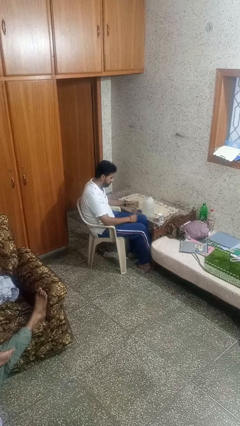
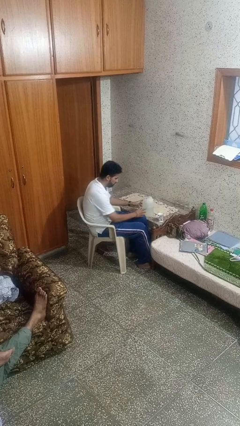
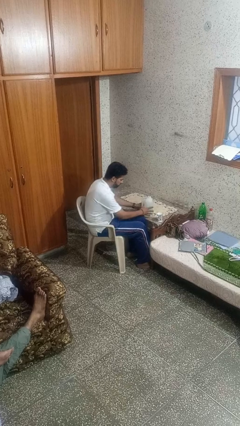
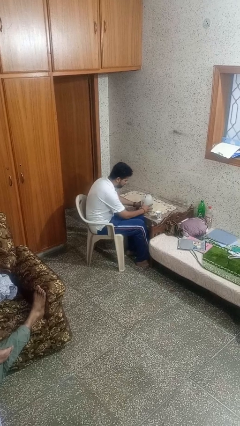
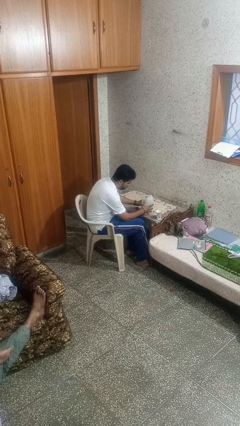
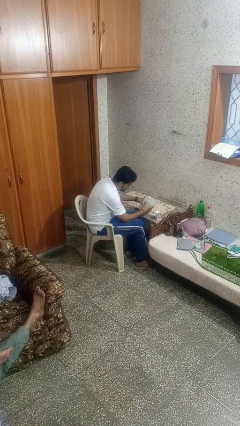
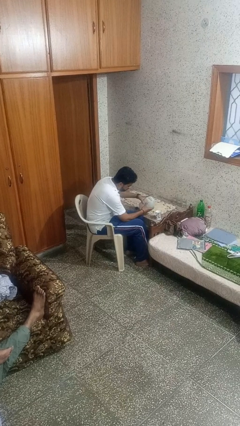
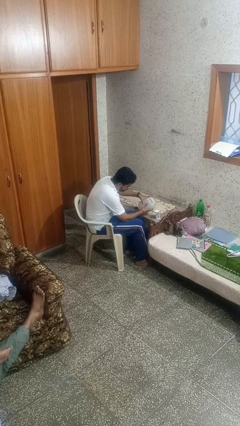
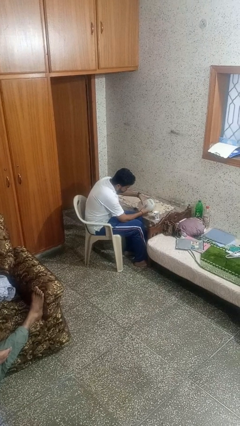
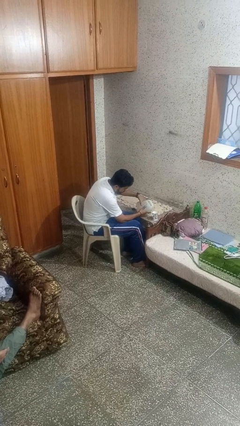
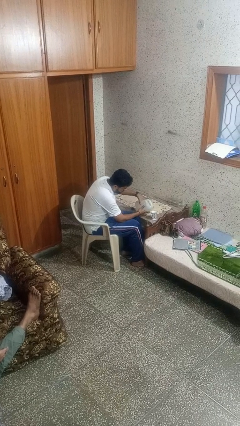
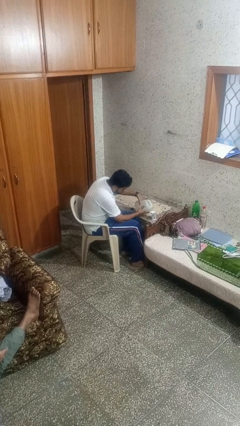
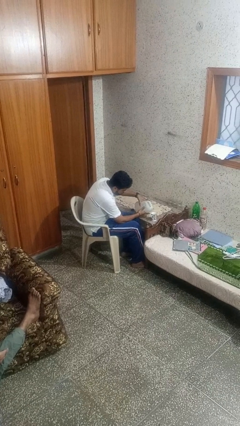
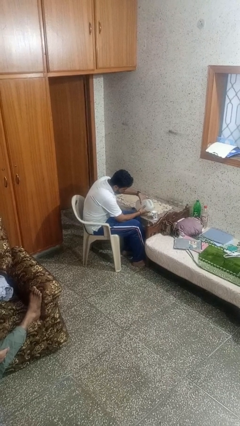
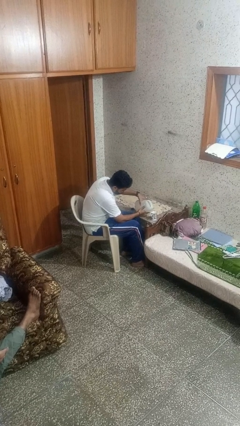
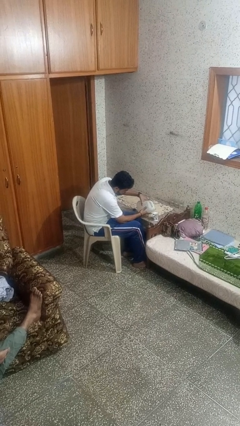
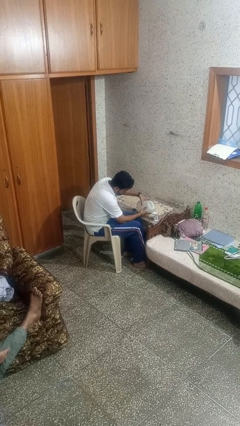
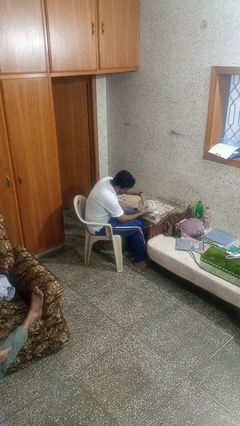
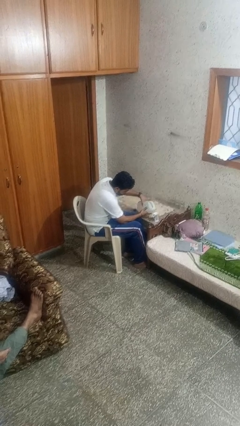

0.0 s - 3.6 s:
person pours liquid into cup

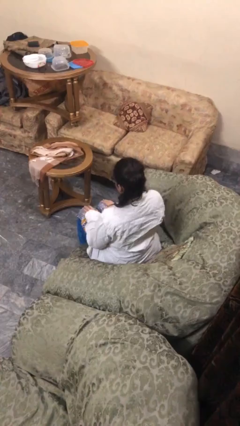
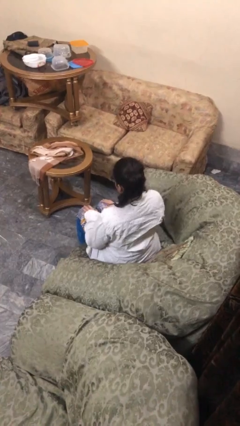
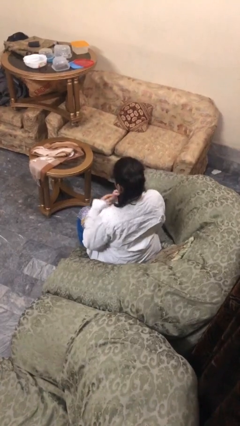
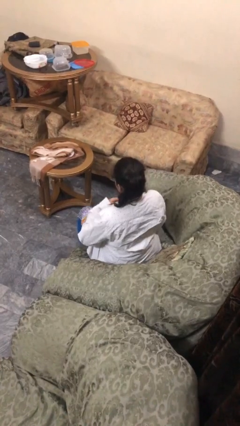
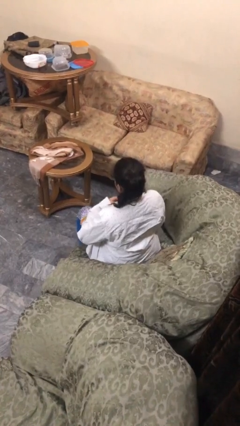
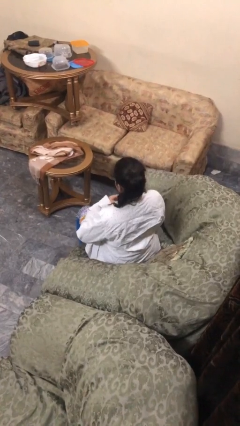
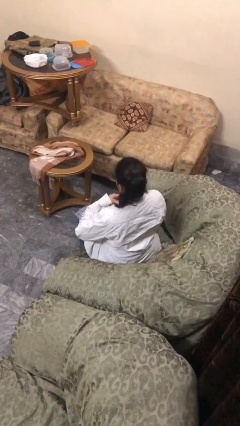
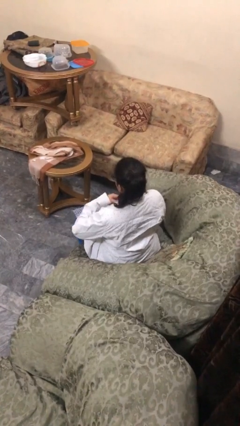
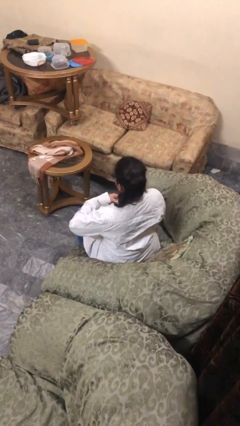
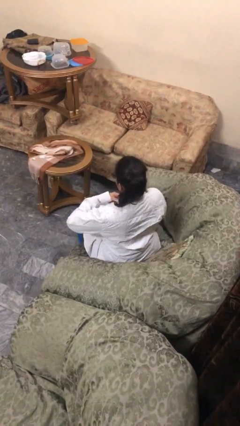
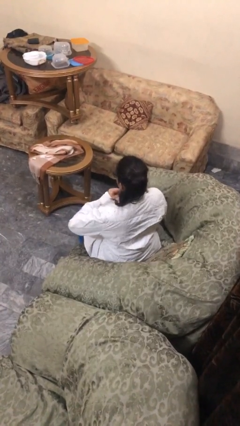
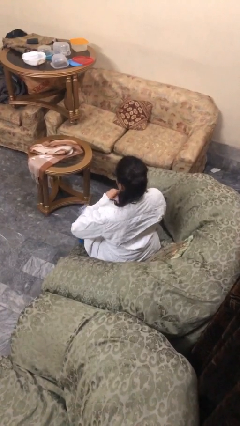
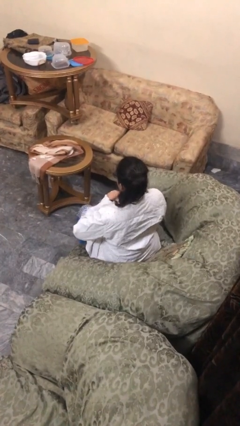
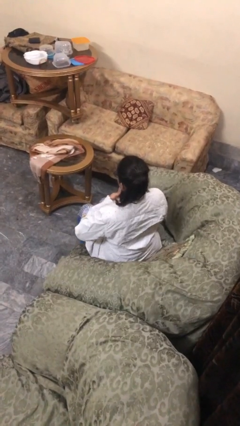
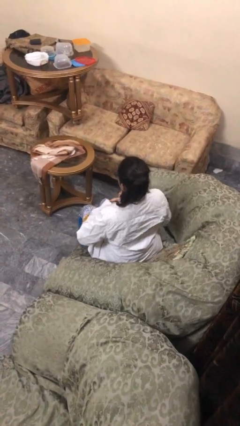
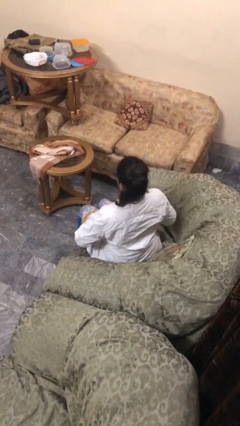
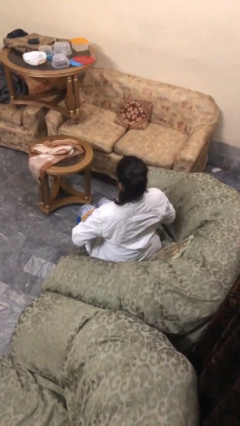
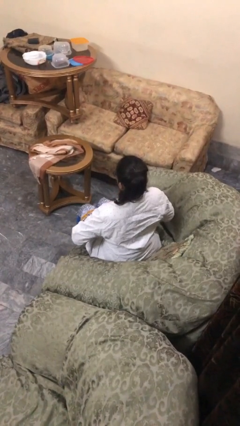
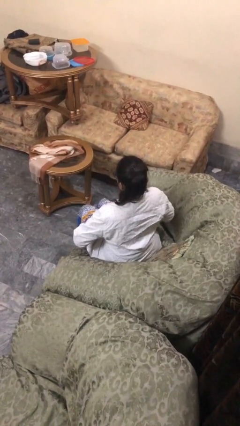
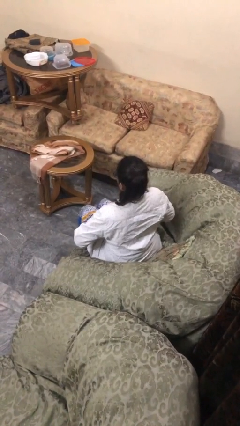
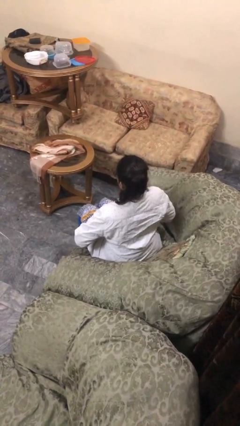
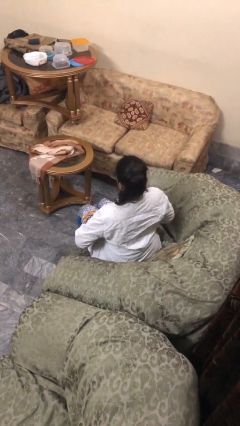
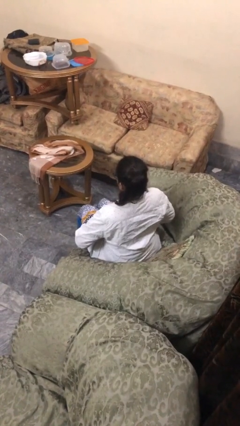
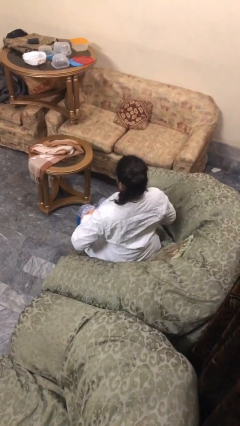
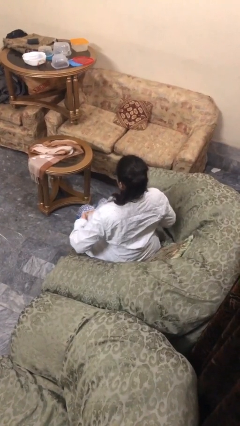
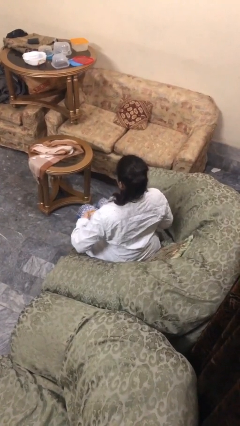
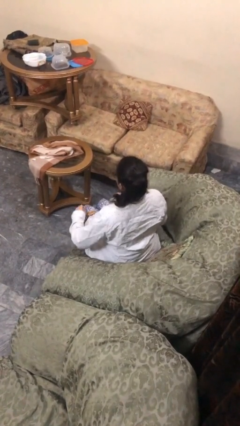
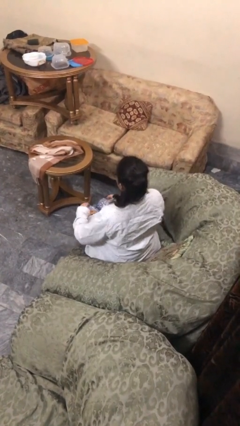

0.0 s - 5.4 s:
person unbuttons shirt

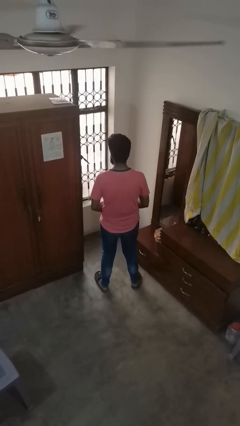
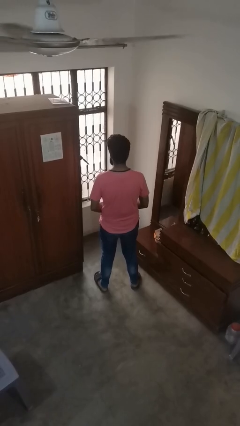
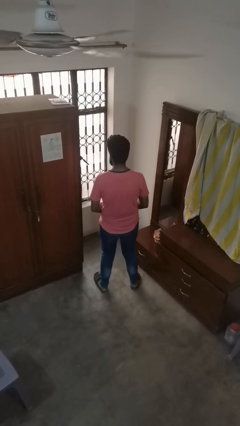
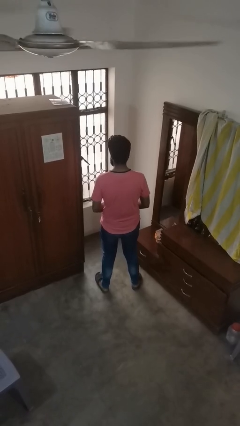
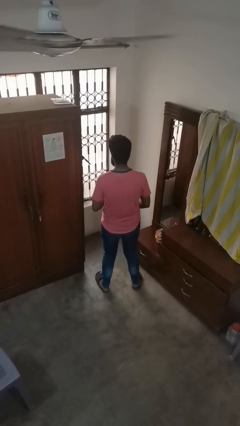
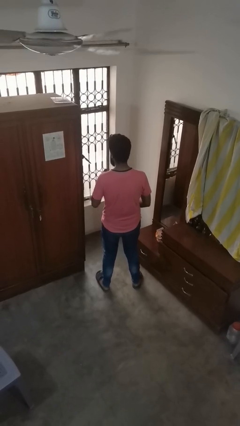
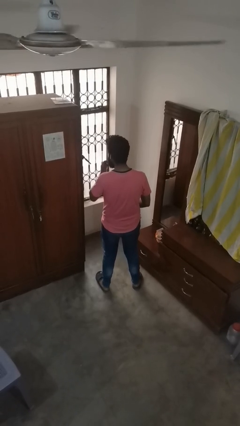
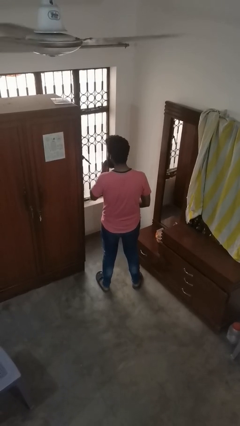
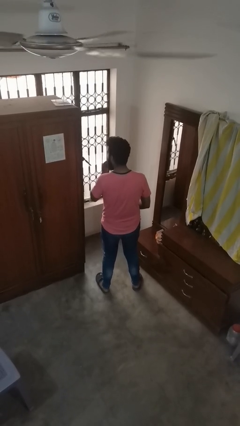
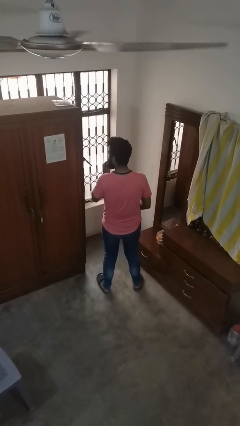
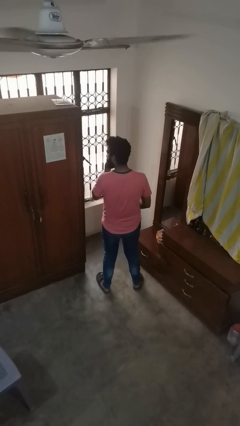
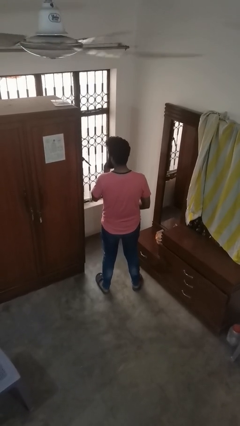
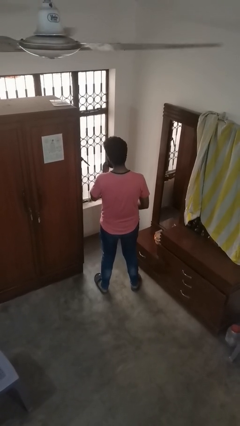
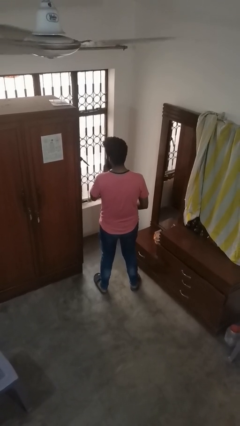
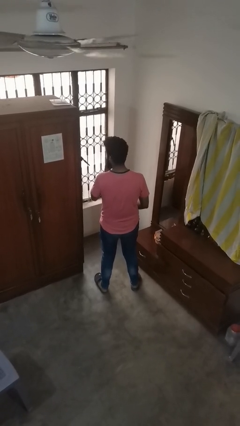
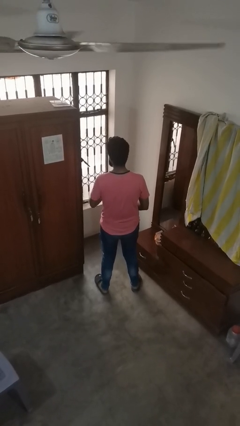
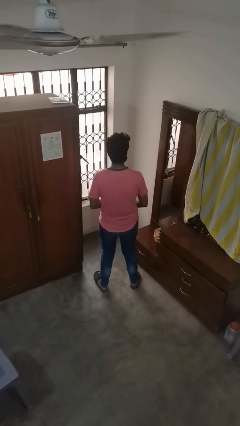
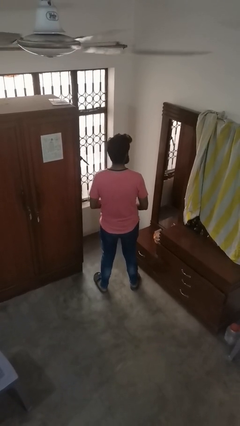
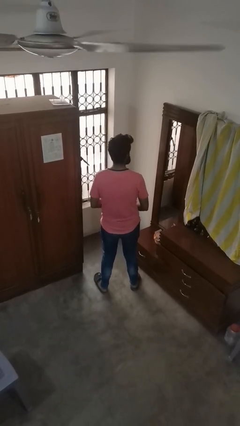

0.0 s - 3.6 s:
person applies lip makeup

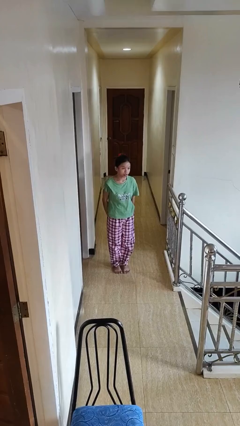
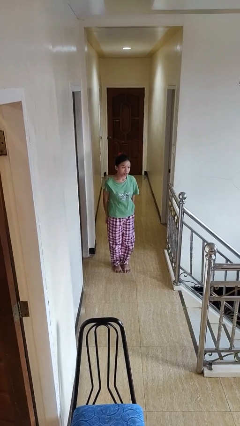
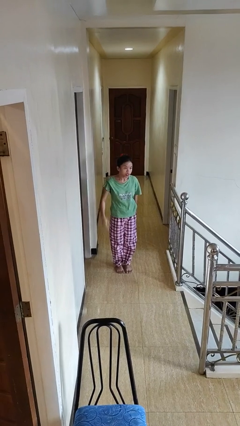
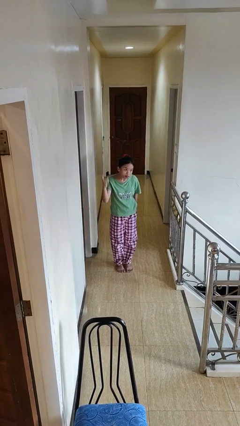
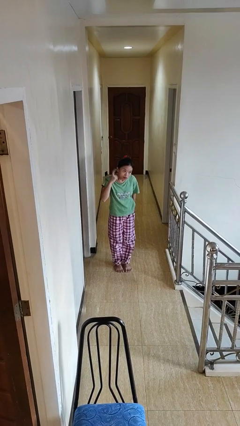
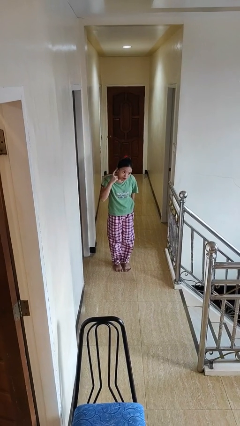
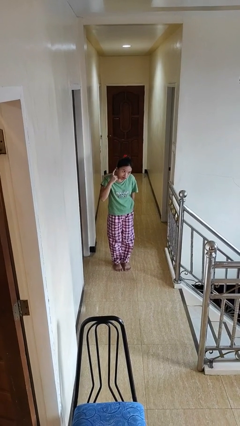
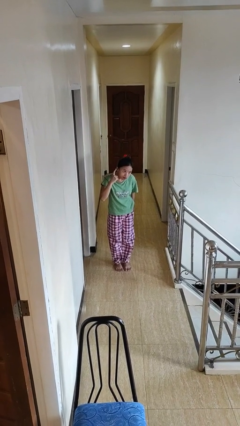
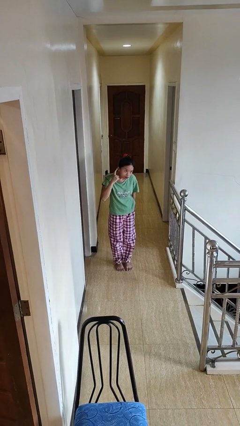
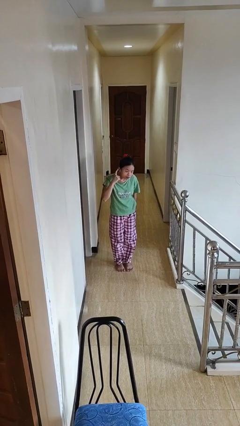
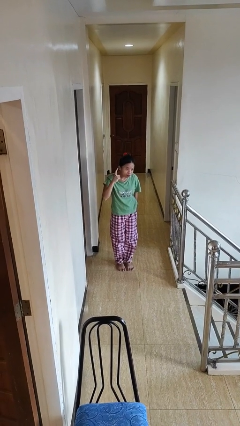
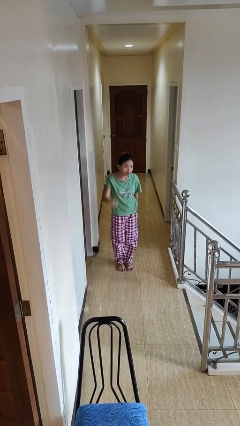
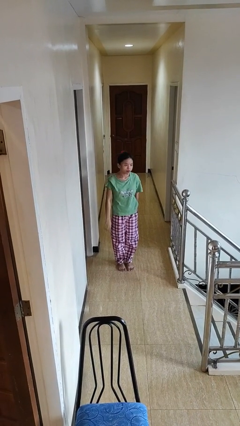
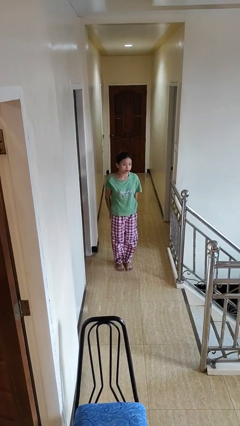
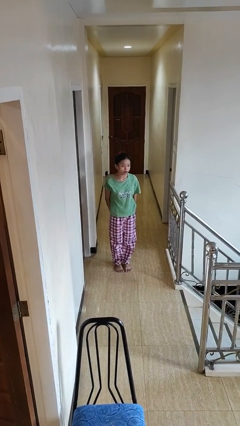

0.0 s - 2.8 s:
person gestures listen closely

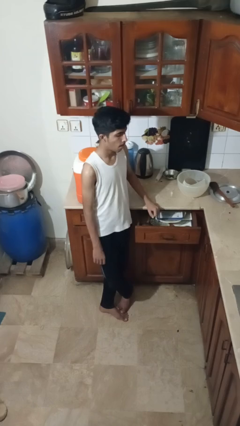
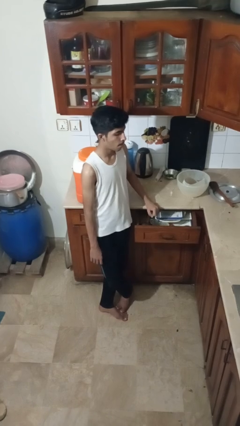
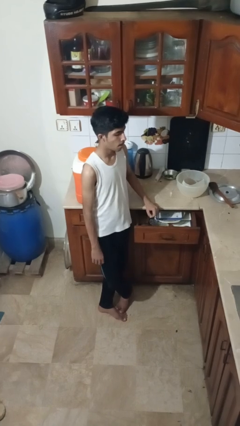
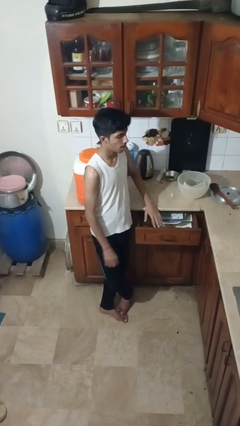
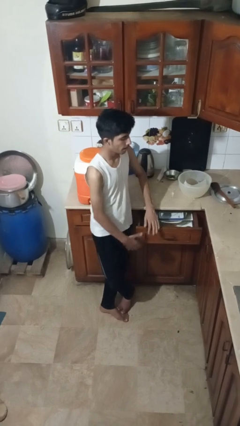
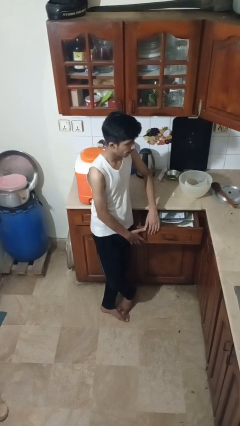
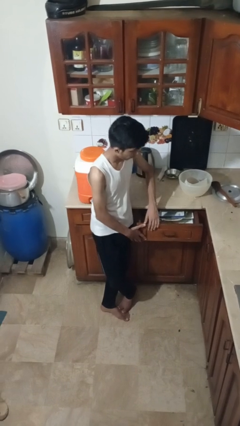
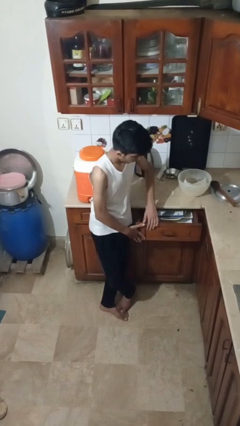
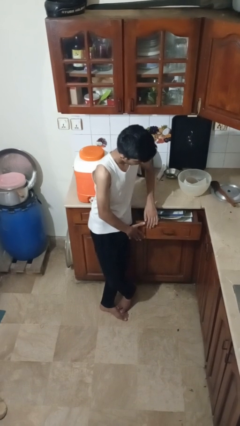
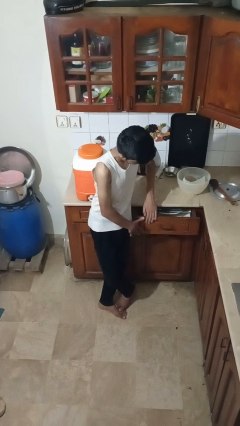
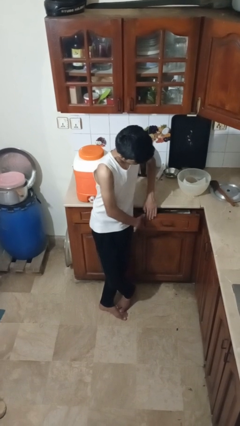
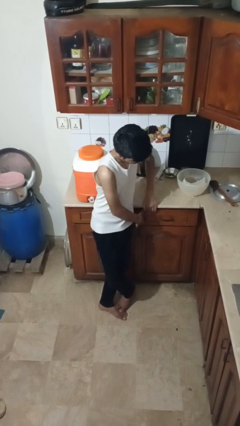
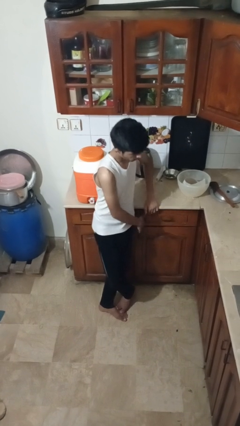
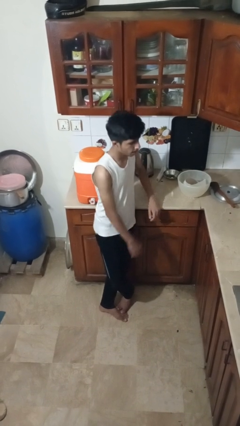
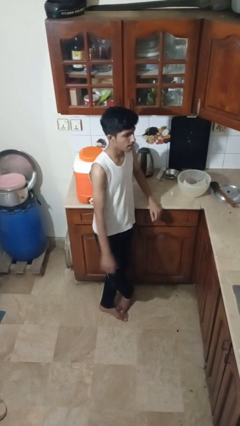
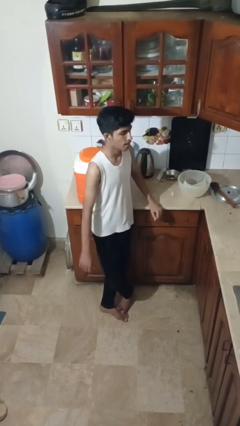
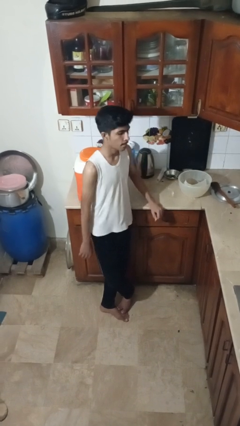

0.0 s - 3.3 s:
person closes kitchen drawer
